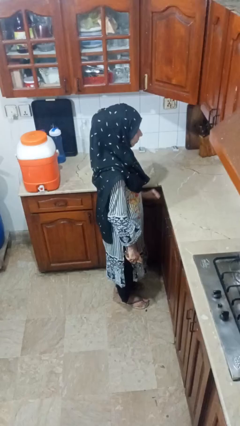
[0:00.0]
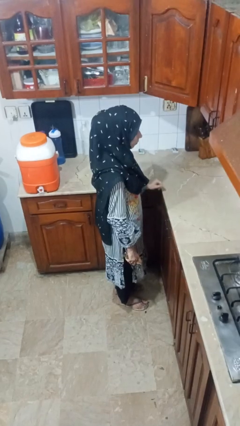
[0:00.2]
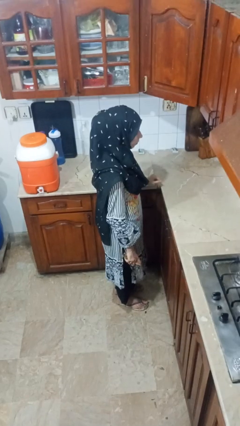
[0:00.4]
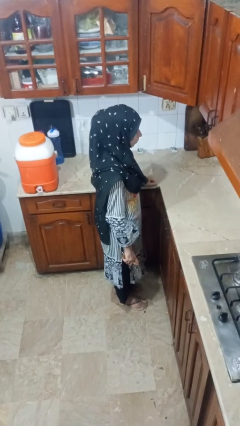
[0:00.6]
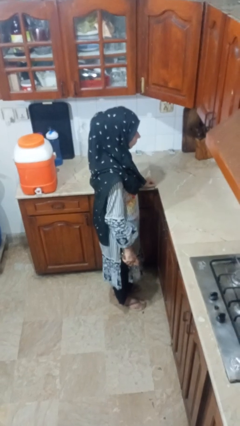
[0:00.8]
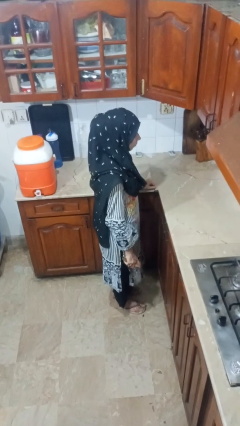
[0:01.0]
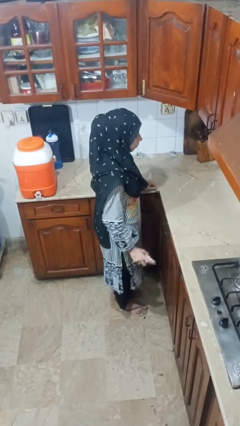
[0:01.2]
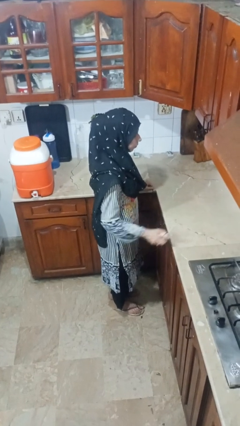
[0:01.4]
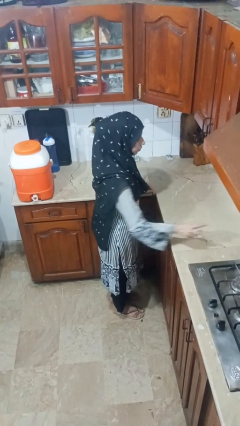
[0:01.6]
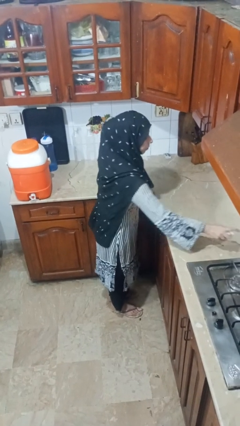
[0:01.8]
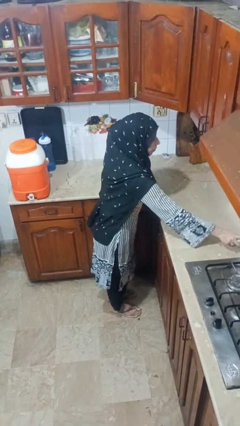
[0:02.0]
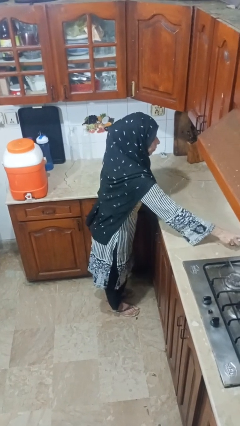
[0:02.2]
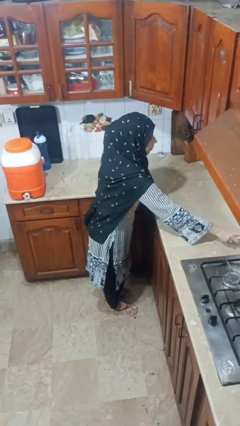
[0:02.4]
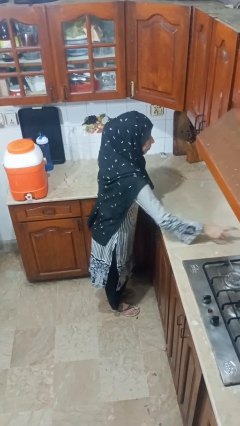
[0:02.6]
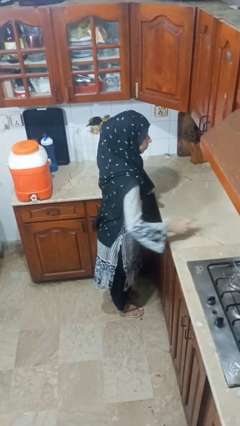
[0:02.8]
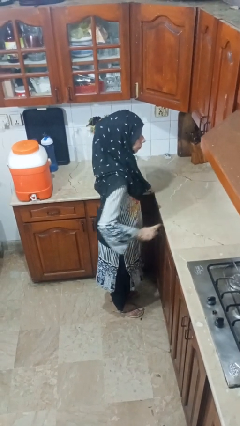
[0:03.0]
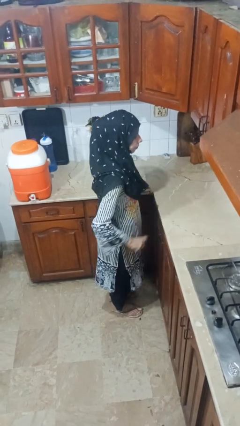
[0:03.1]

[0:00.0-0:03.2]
person sprays from bottle

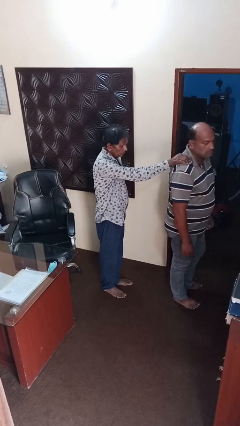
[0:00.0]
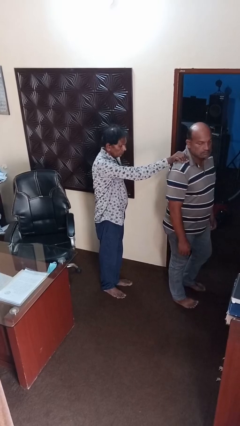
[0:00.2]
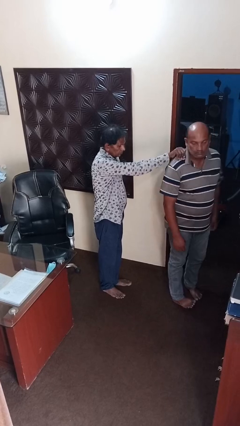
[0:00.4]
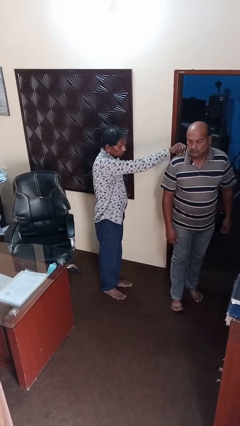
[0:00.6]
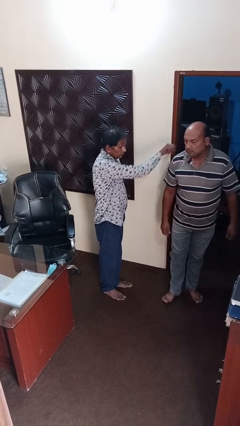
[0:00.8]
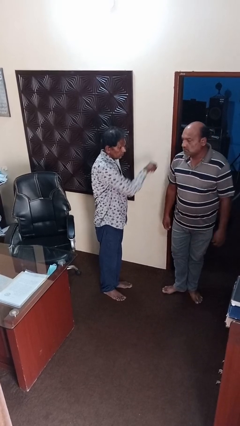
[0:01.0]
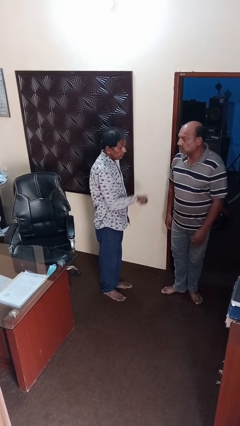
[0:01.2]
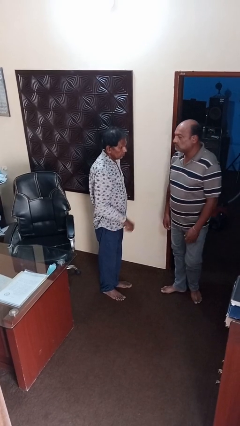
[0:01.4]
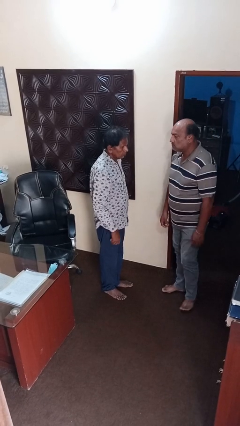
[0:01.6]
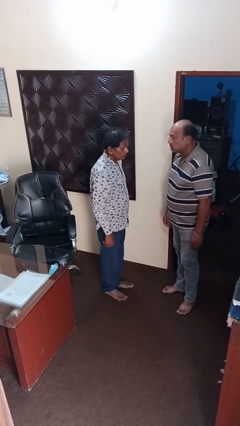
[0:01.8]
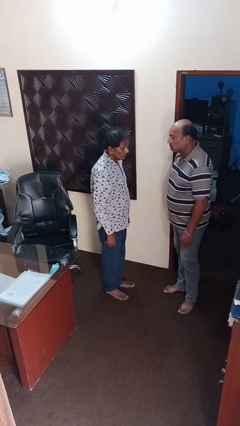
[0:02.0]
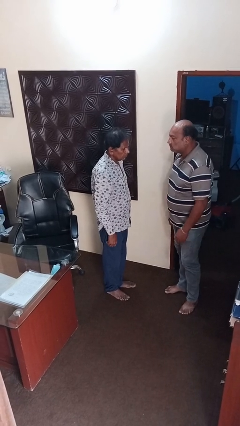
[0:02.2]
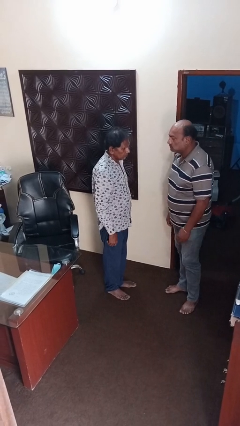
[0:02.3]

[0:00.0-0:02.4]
person spins person around

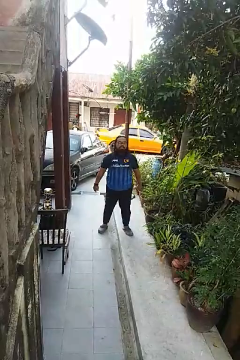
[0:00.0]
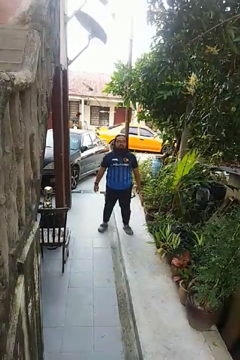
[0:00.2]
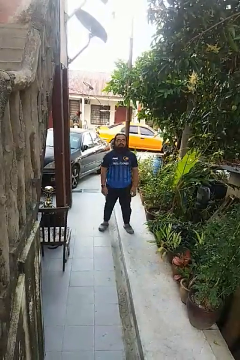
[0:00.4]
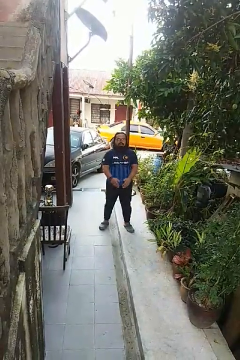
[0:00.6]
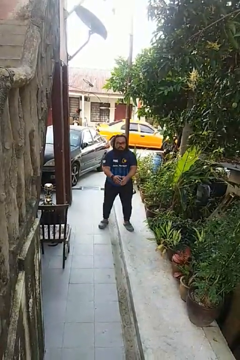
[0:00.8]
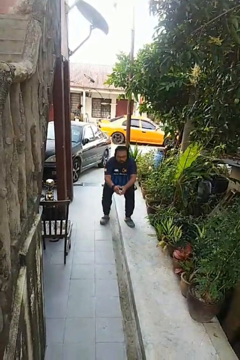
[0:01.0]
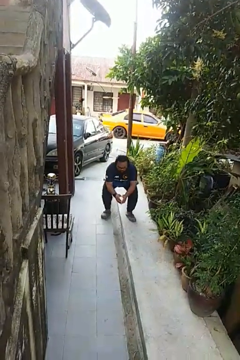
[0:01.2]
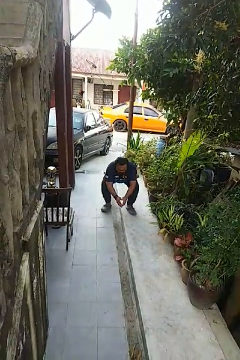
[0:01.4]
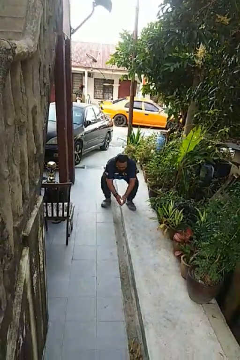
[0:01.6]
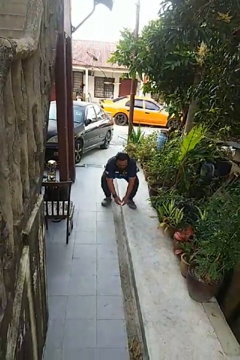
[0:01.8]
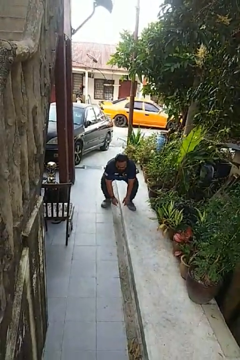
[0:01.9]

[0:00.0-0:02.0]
person squats

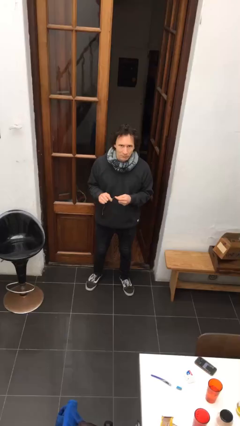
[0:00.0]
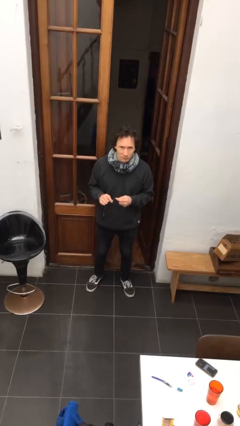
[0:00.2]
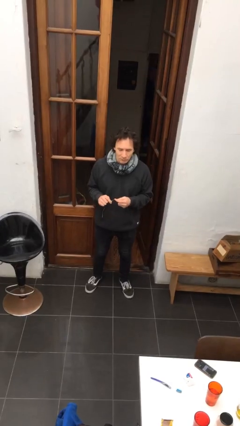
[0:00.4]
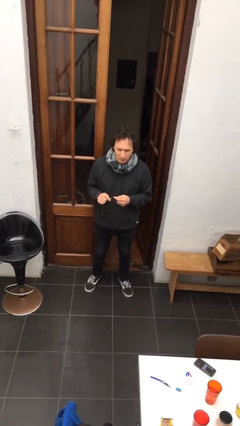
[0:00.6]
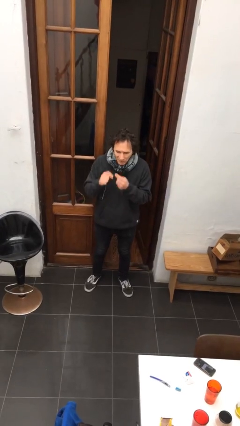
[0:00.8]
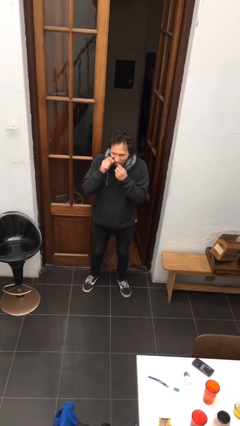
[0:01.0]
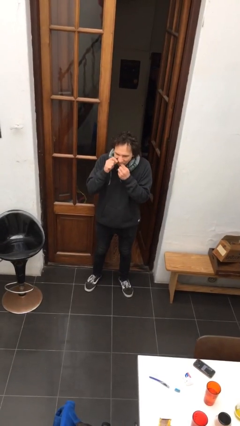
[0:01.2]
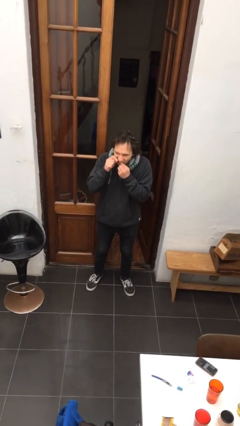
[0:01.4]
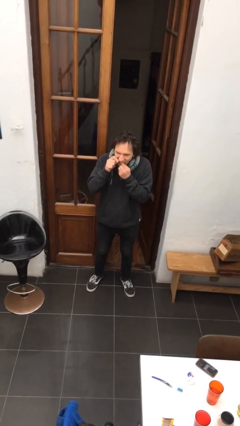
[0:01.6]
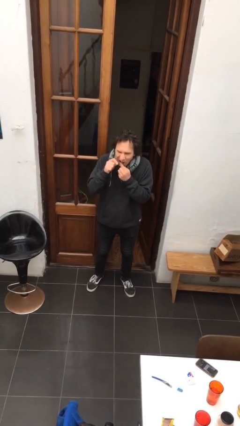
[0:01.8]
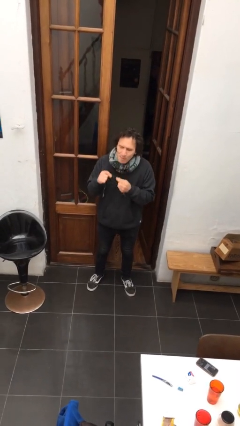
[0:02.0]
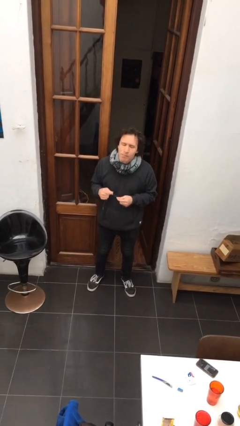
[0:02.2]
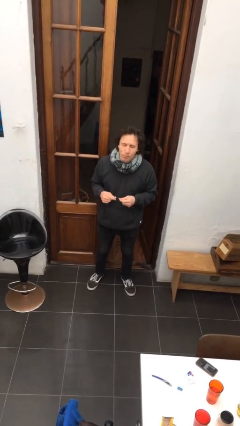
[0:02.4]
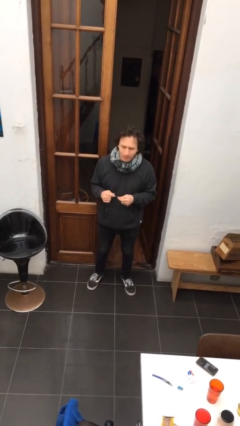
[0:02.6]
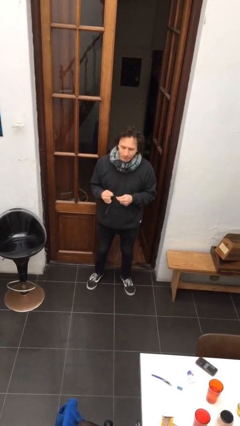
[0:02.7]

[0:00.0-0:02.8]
person flosses

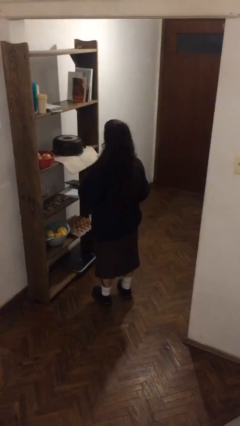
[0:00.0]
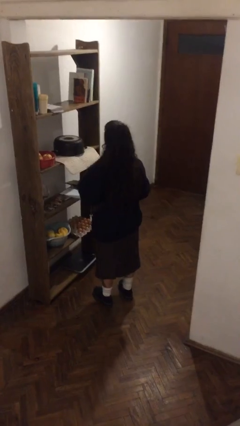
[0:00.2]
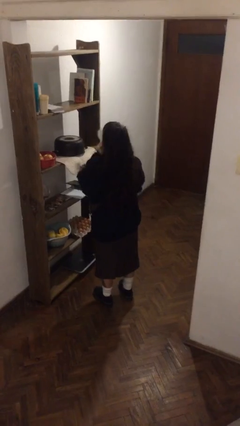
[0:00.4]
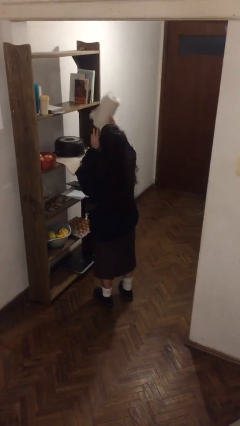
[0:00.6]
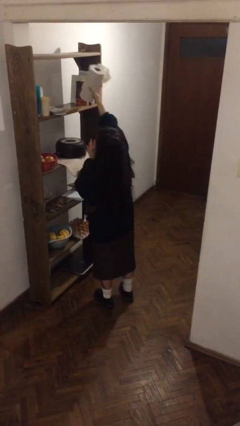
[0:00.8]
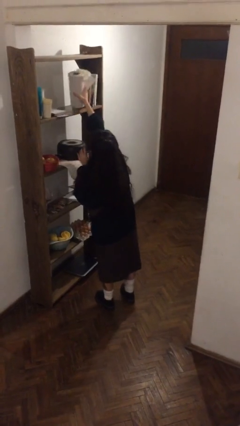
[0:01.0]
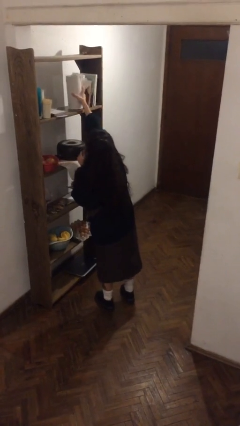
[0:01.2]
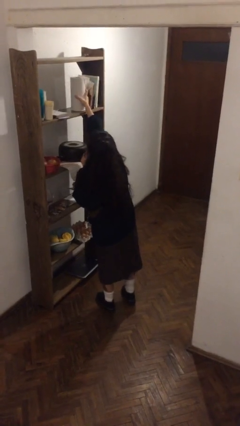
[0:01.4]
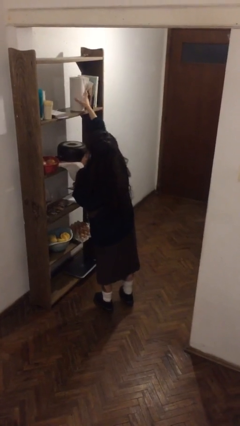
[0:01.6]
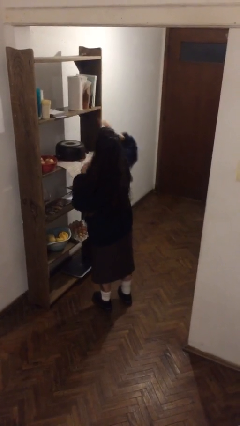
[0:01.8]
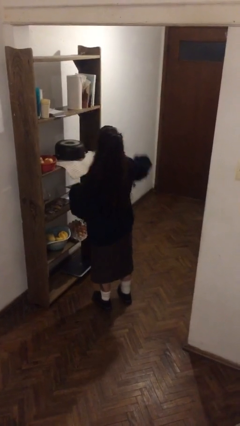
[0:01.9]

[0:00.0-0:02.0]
person puts down object on shelf

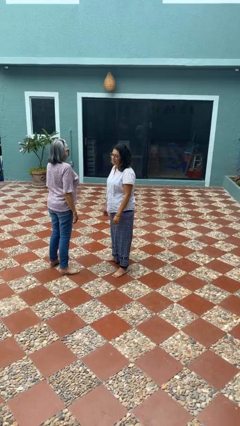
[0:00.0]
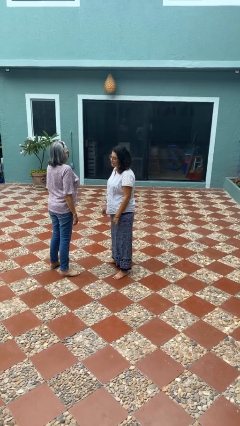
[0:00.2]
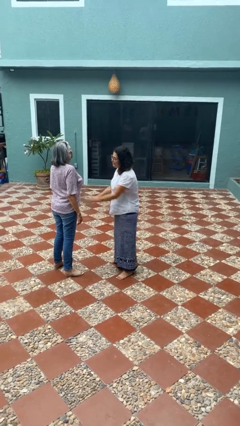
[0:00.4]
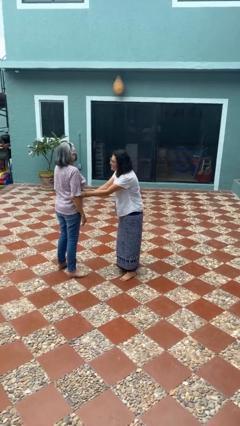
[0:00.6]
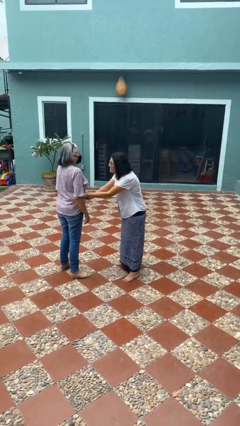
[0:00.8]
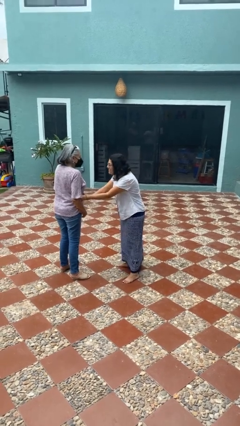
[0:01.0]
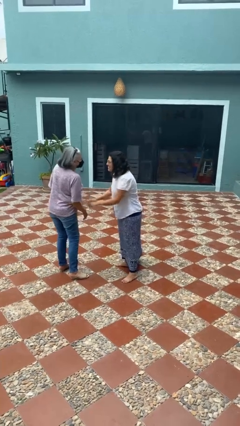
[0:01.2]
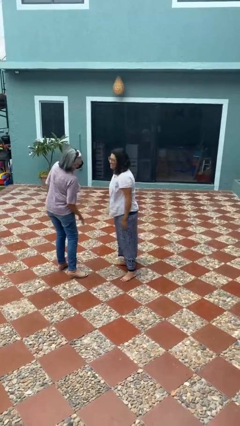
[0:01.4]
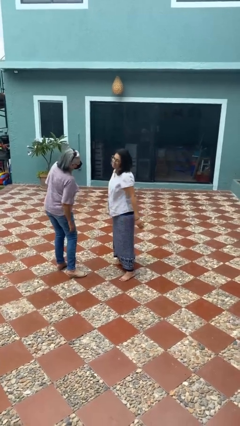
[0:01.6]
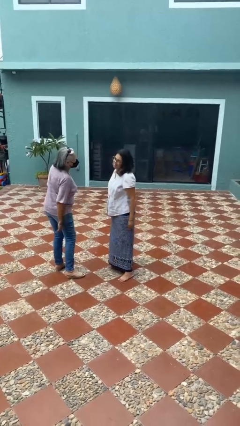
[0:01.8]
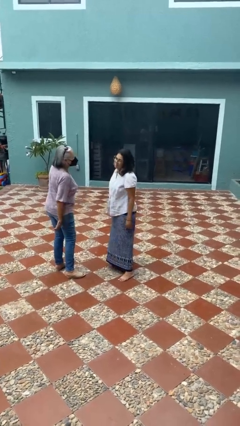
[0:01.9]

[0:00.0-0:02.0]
person tickles person

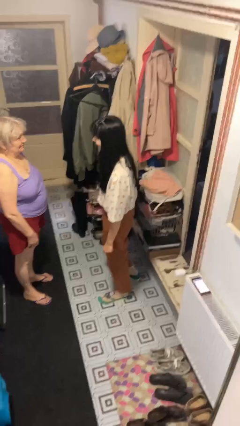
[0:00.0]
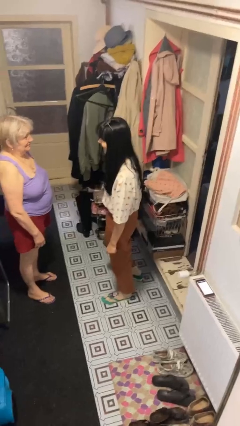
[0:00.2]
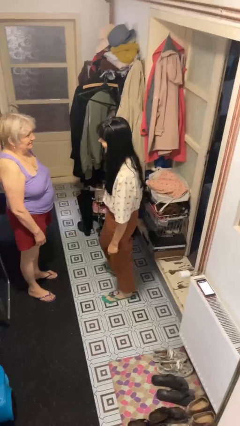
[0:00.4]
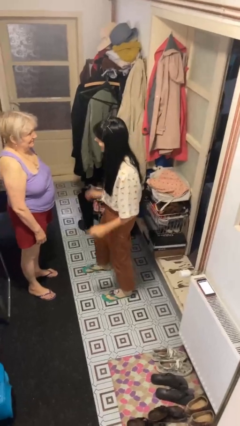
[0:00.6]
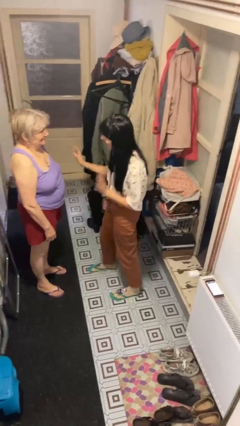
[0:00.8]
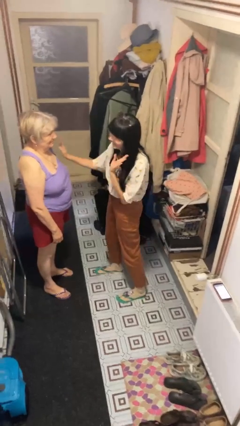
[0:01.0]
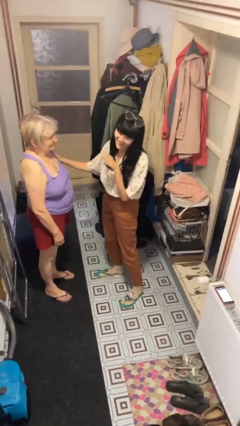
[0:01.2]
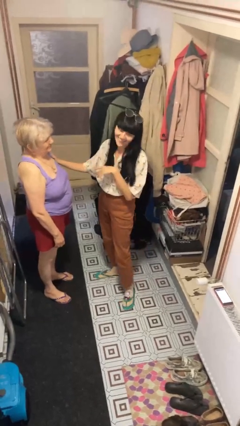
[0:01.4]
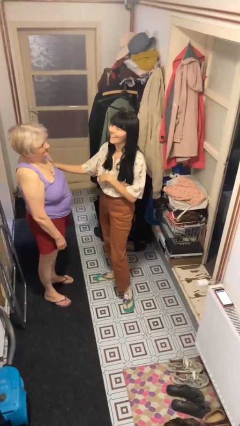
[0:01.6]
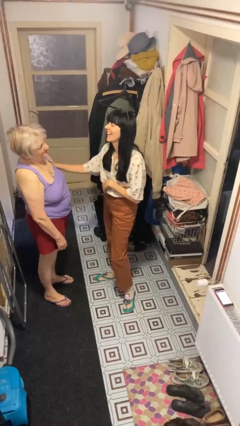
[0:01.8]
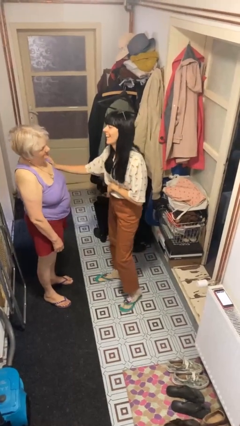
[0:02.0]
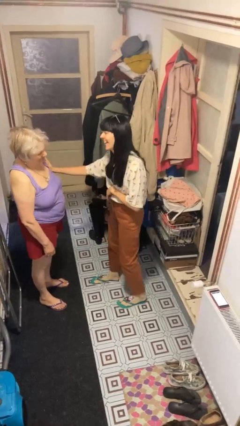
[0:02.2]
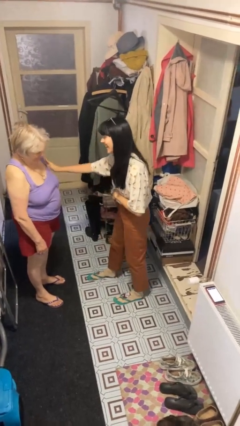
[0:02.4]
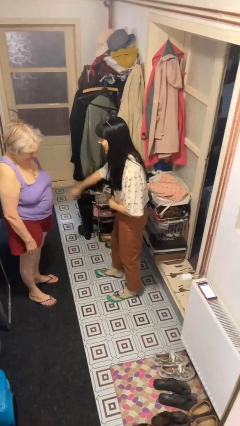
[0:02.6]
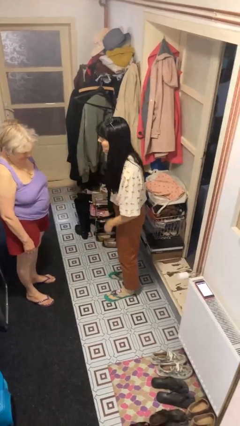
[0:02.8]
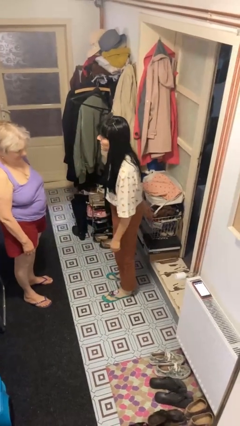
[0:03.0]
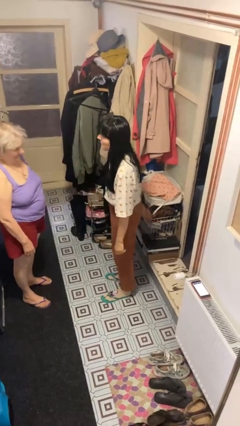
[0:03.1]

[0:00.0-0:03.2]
person shoves person
